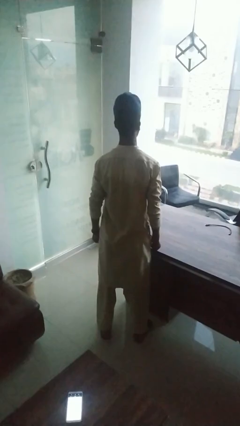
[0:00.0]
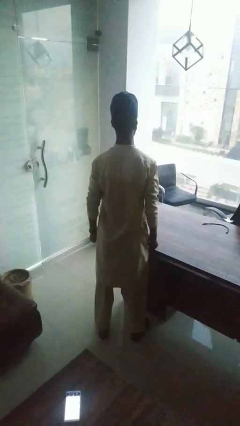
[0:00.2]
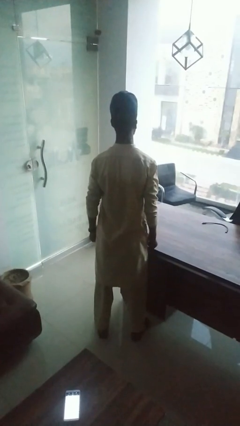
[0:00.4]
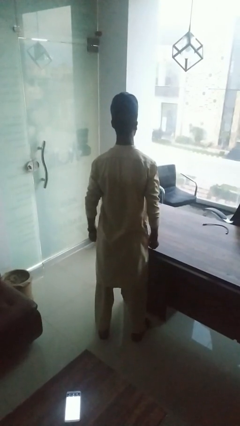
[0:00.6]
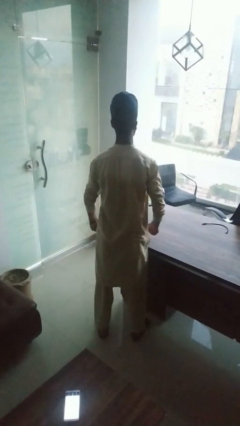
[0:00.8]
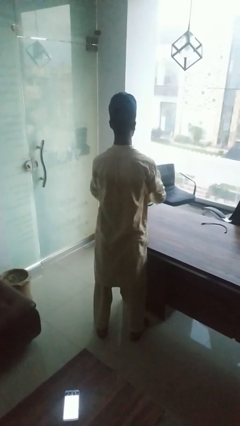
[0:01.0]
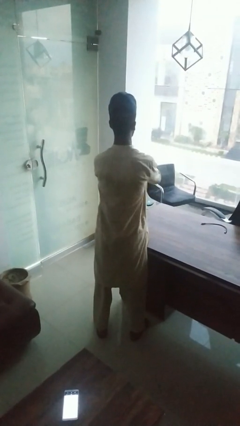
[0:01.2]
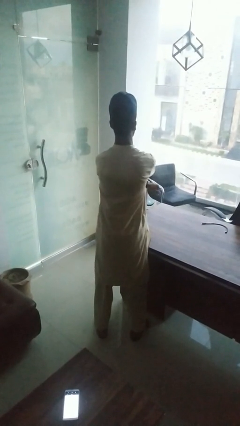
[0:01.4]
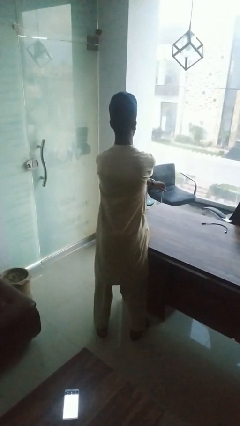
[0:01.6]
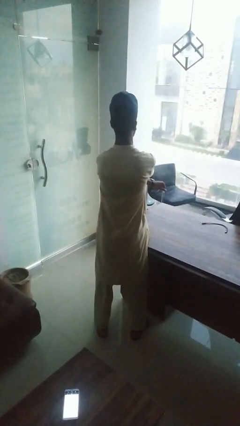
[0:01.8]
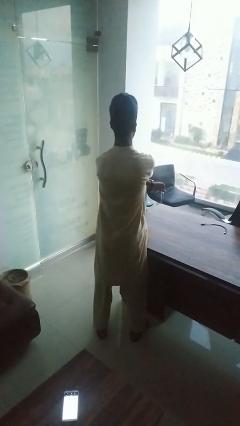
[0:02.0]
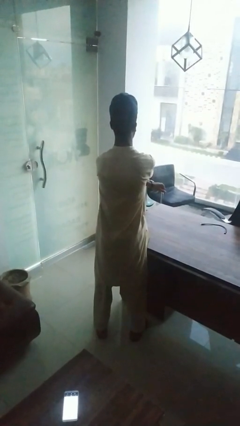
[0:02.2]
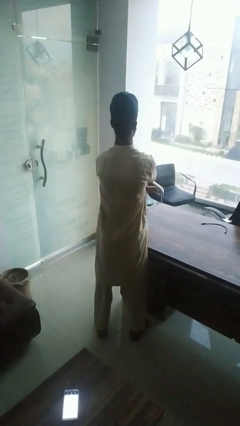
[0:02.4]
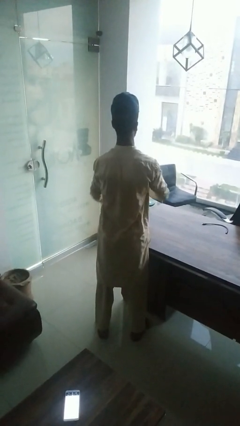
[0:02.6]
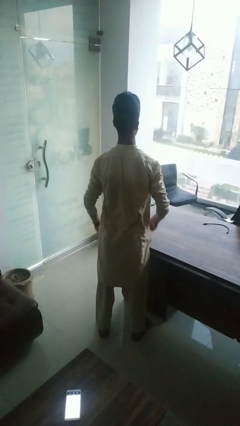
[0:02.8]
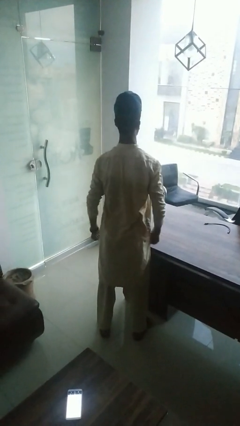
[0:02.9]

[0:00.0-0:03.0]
person gestures arms x

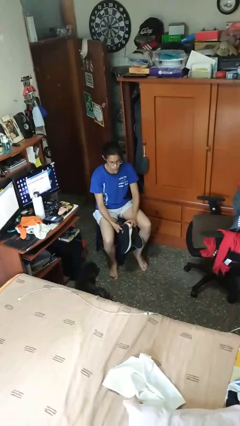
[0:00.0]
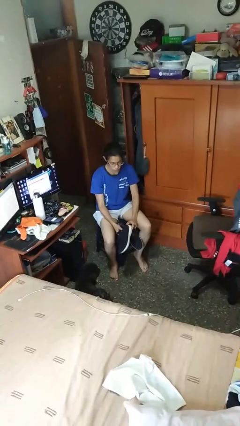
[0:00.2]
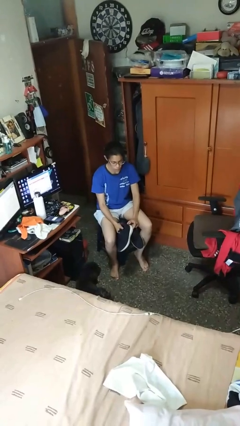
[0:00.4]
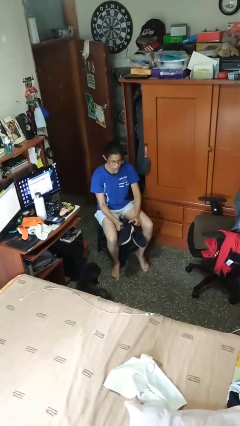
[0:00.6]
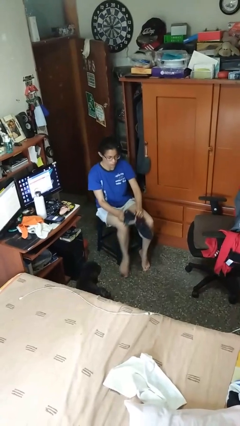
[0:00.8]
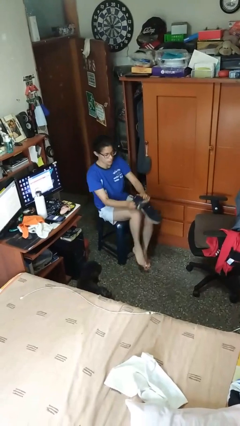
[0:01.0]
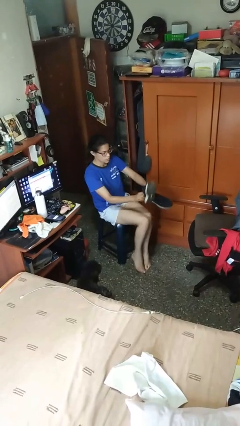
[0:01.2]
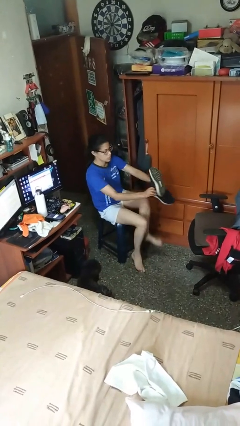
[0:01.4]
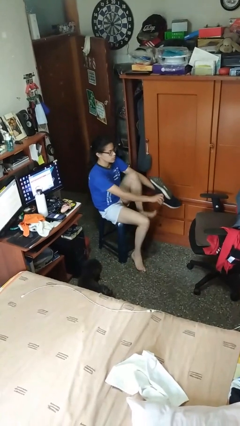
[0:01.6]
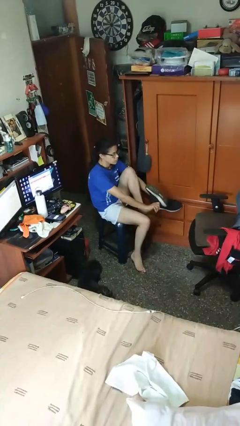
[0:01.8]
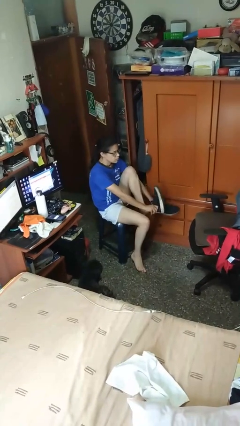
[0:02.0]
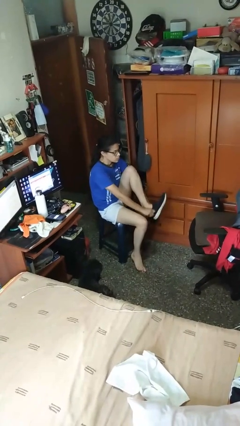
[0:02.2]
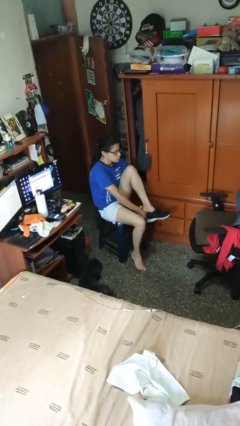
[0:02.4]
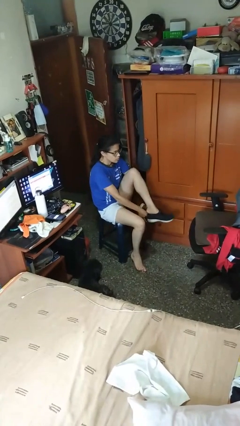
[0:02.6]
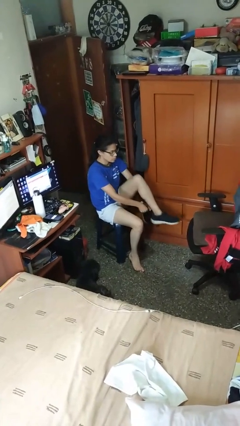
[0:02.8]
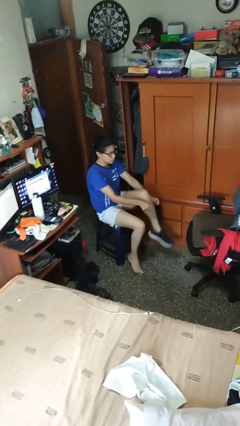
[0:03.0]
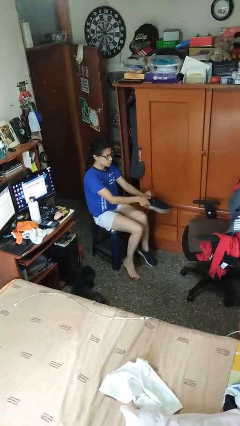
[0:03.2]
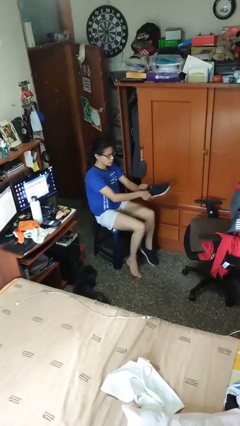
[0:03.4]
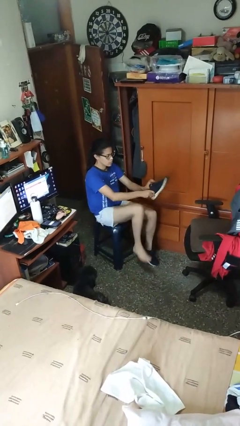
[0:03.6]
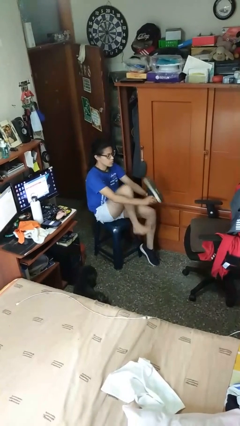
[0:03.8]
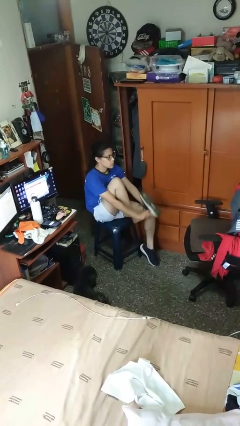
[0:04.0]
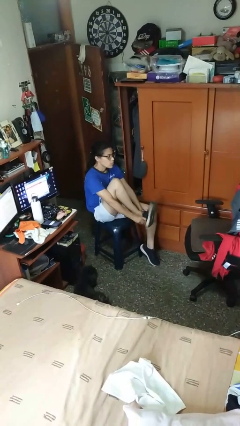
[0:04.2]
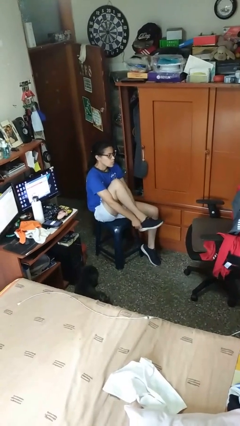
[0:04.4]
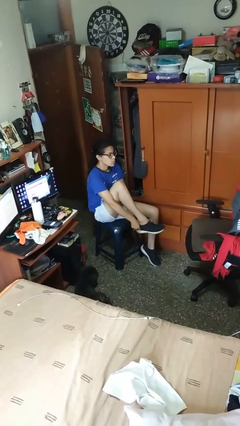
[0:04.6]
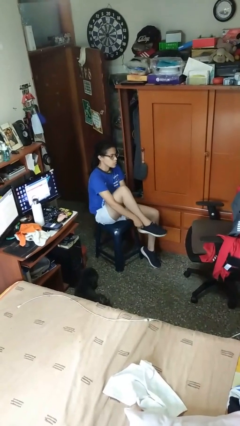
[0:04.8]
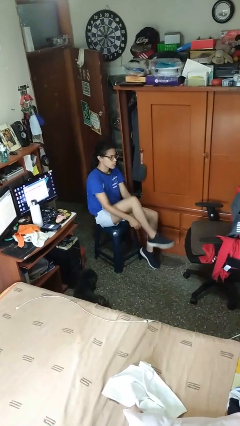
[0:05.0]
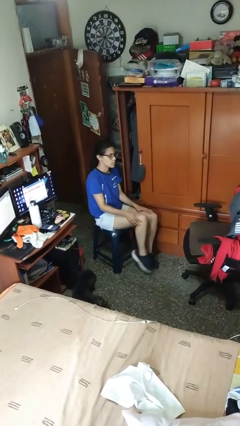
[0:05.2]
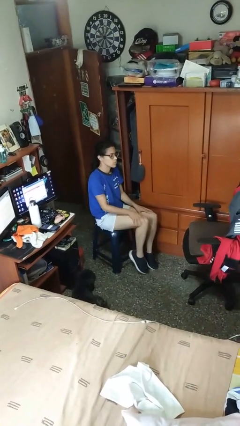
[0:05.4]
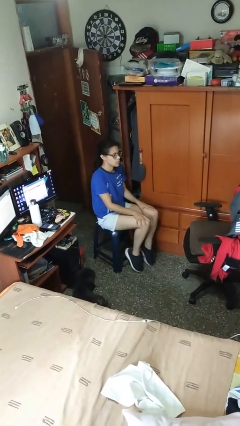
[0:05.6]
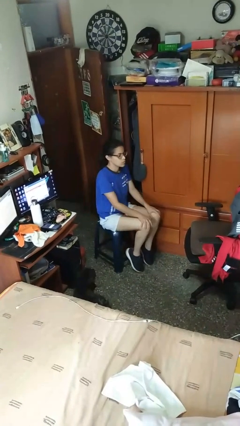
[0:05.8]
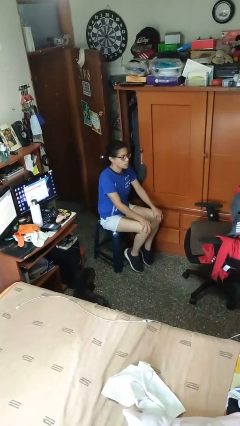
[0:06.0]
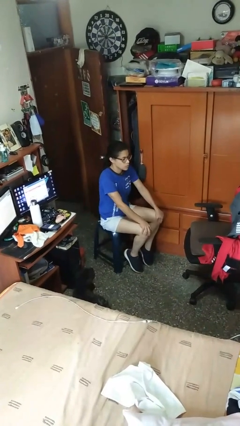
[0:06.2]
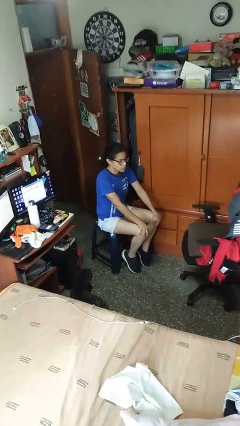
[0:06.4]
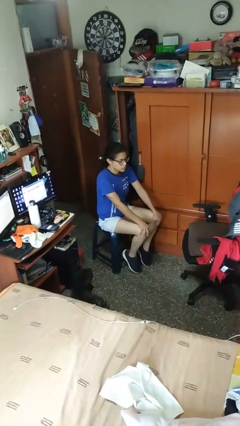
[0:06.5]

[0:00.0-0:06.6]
person puts on shoes

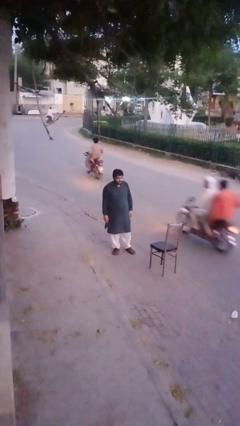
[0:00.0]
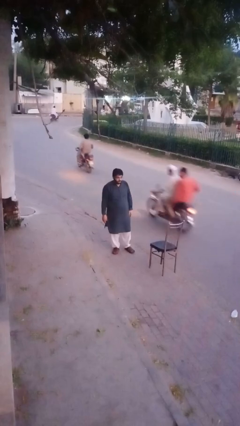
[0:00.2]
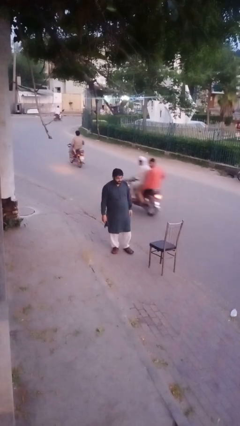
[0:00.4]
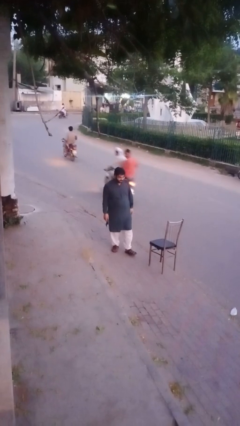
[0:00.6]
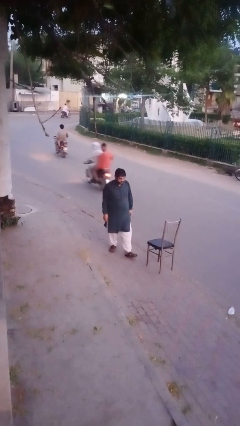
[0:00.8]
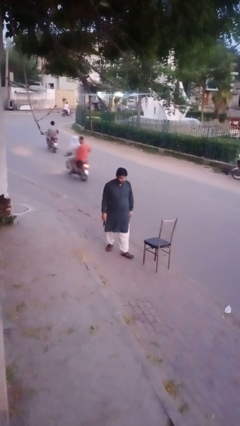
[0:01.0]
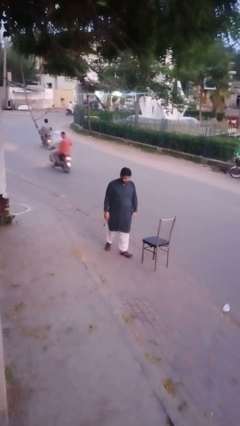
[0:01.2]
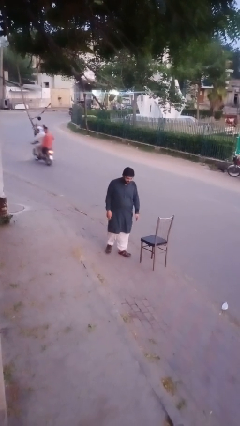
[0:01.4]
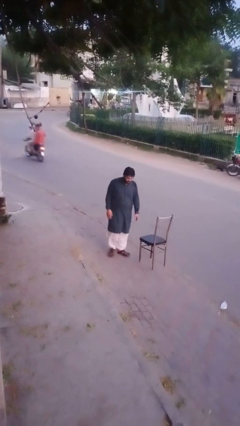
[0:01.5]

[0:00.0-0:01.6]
person trips on object on floor

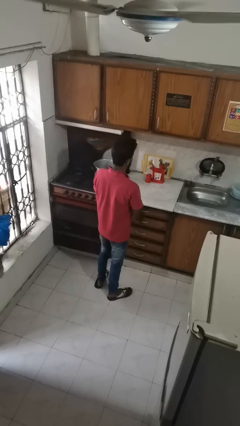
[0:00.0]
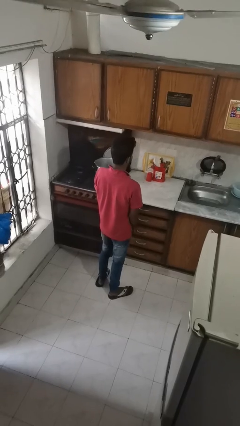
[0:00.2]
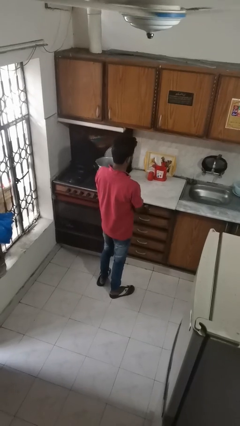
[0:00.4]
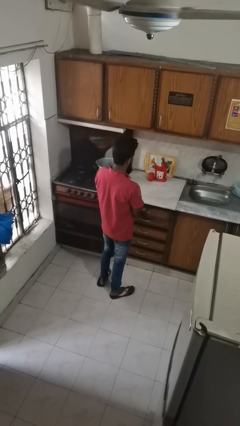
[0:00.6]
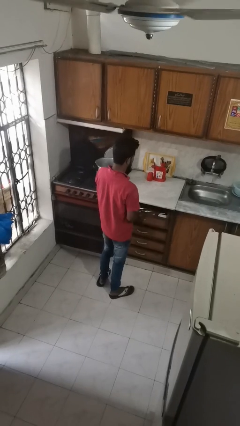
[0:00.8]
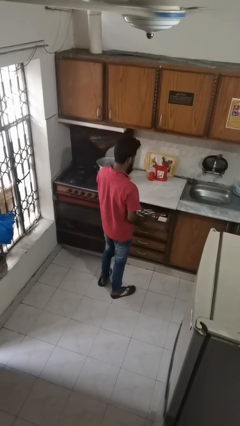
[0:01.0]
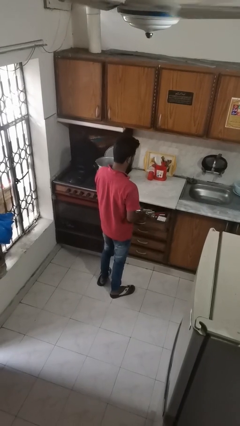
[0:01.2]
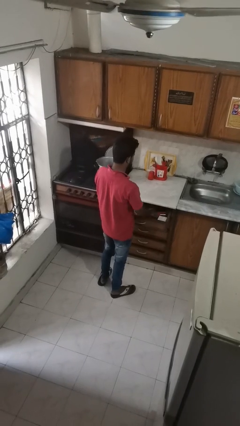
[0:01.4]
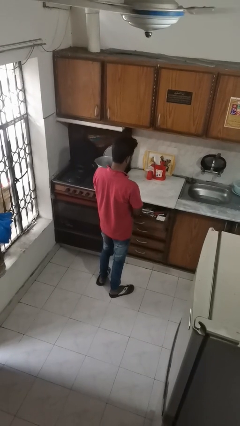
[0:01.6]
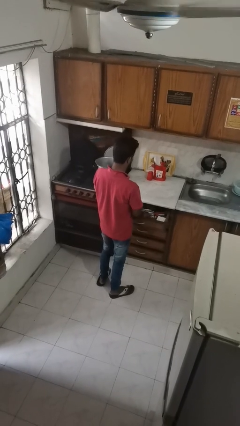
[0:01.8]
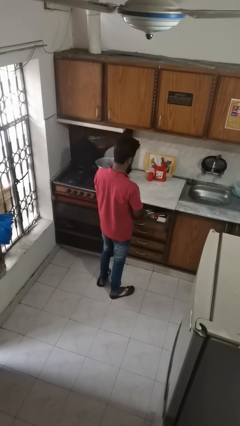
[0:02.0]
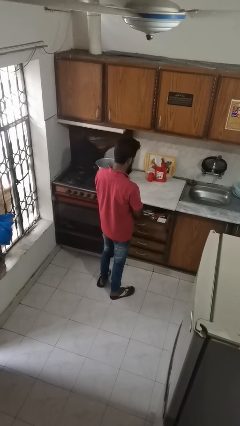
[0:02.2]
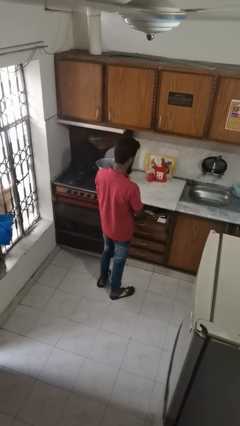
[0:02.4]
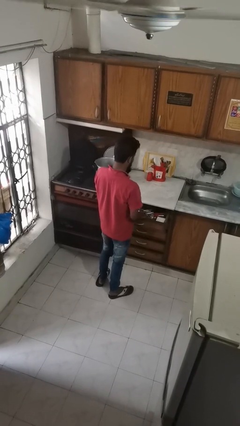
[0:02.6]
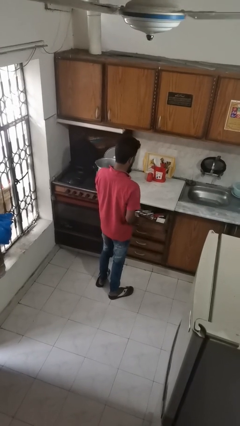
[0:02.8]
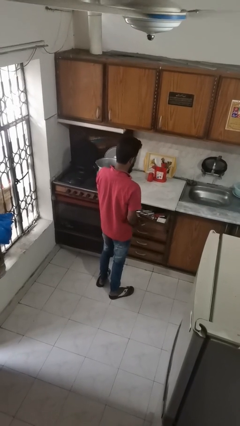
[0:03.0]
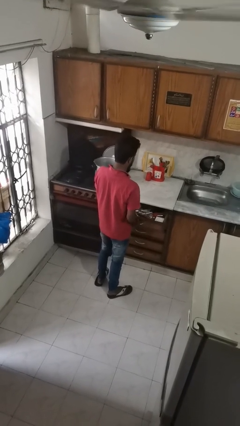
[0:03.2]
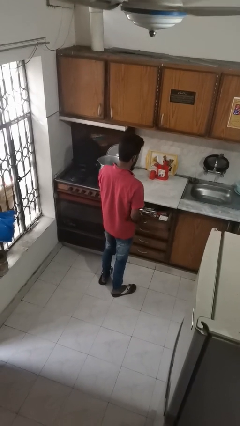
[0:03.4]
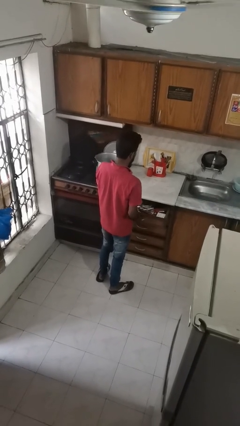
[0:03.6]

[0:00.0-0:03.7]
person searches in kitchen drawer

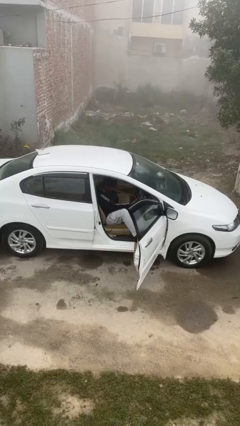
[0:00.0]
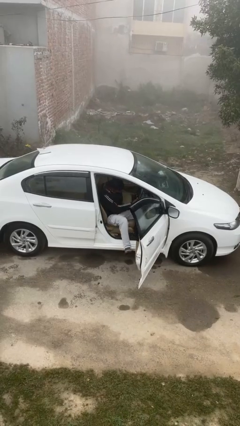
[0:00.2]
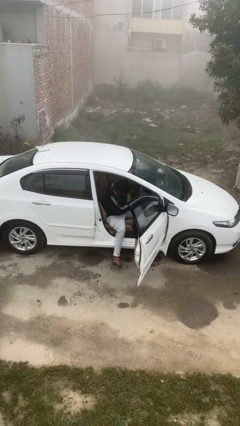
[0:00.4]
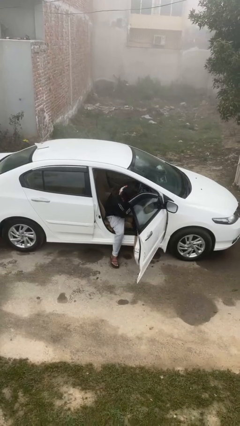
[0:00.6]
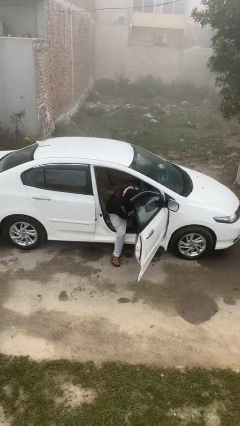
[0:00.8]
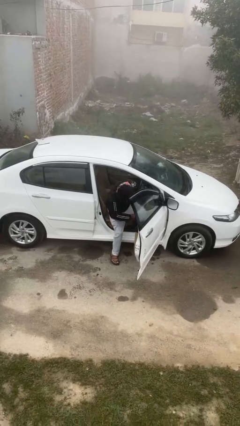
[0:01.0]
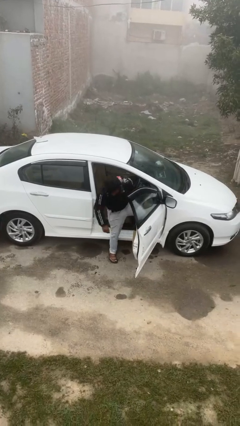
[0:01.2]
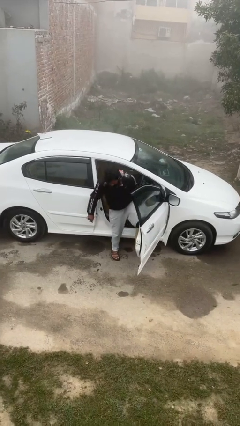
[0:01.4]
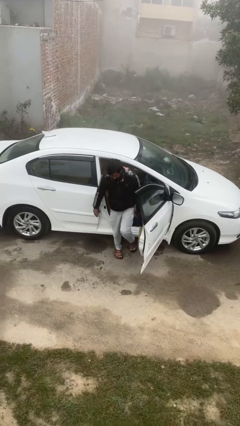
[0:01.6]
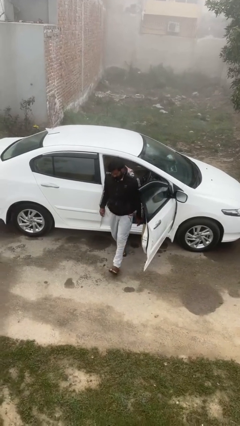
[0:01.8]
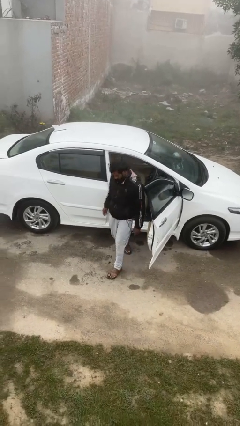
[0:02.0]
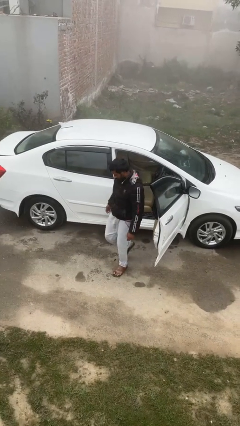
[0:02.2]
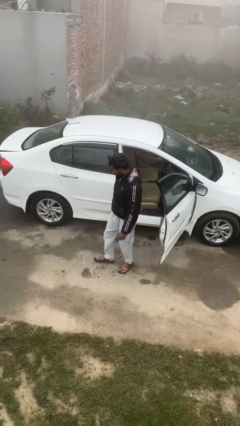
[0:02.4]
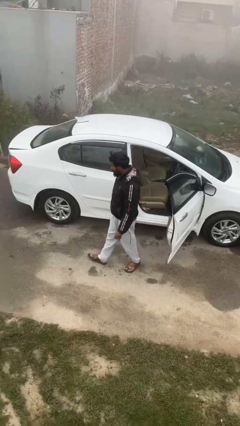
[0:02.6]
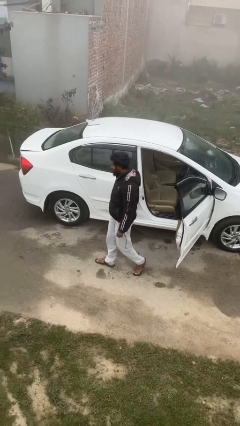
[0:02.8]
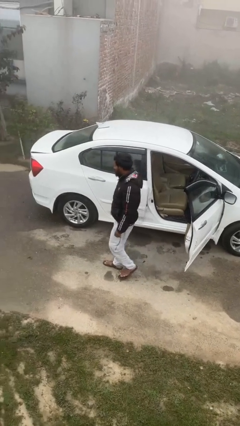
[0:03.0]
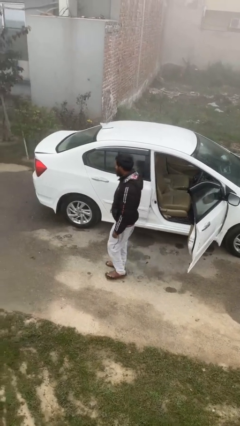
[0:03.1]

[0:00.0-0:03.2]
person exits car
